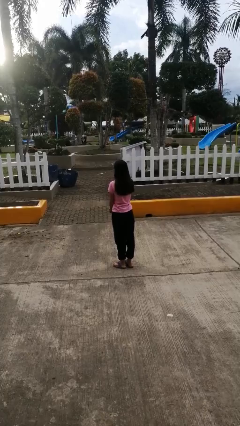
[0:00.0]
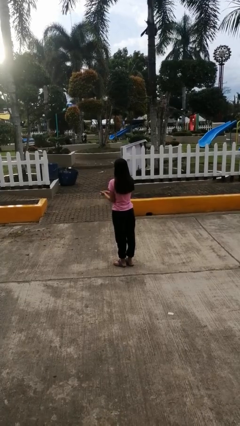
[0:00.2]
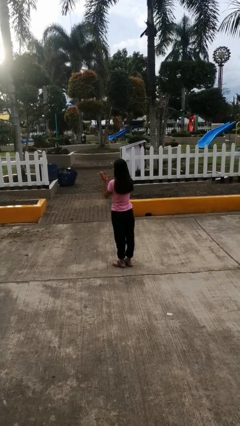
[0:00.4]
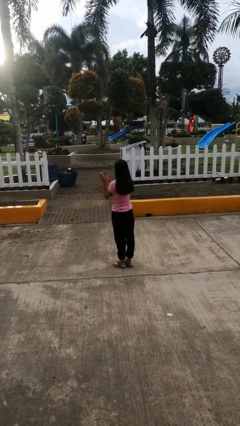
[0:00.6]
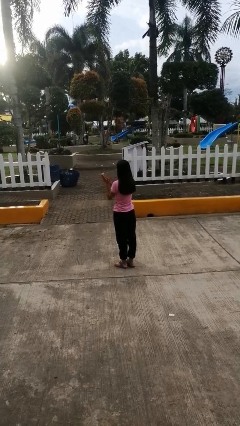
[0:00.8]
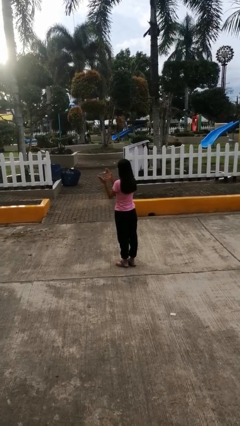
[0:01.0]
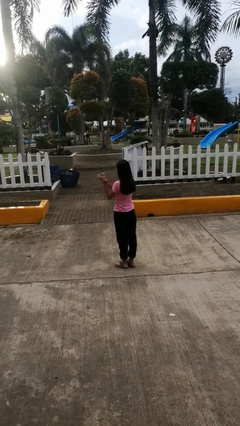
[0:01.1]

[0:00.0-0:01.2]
person claps hands

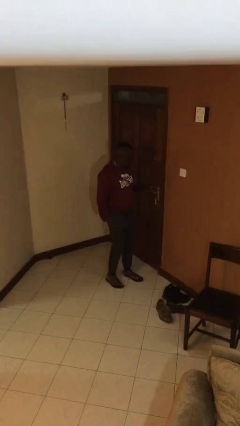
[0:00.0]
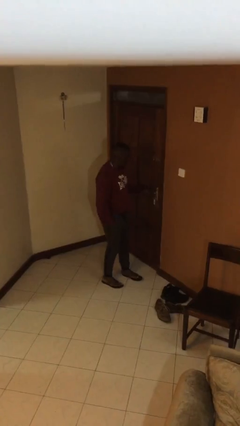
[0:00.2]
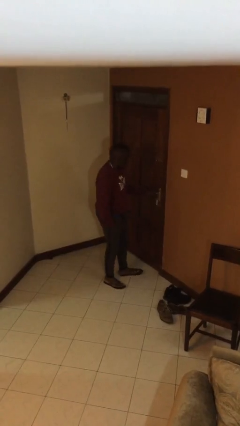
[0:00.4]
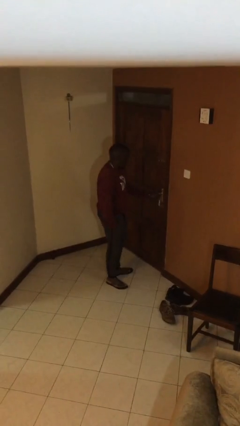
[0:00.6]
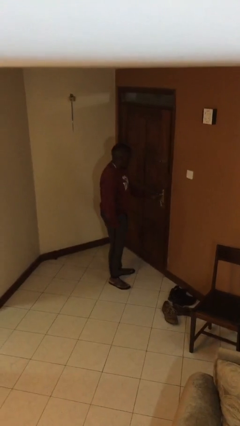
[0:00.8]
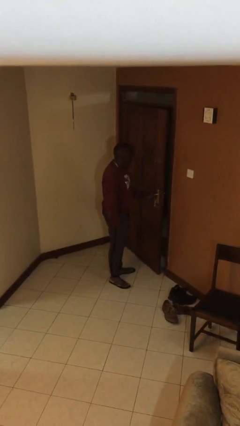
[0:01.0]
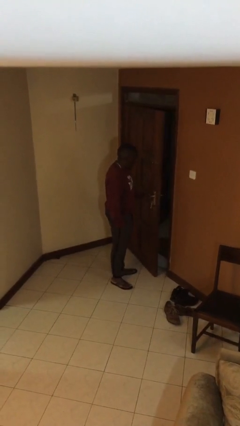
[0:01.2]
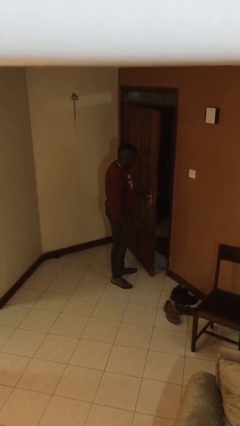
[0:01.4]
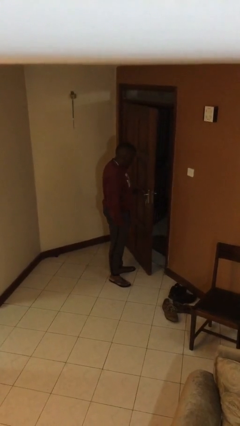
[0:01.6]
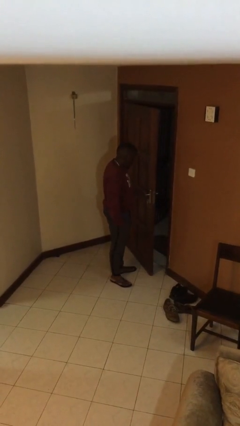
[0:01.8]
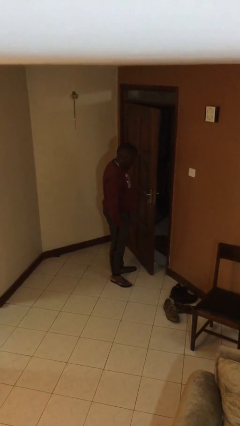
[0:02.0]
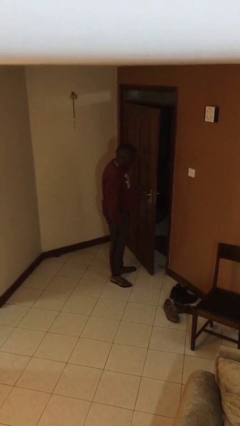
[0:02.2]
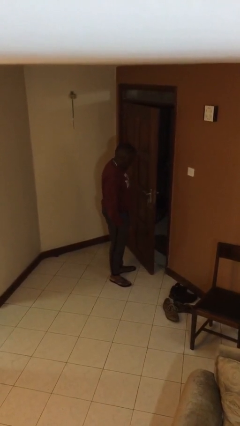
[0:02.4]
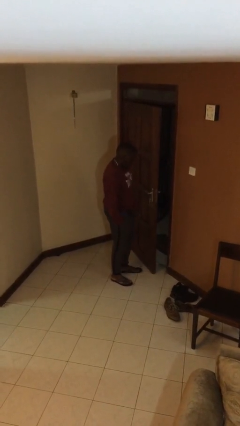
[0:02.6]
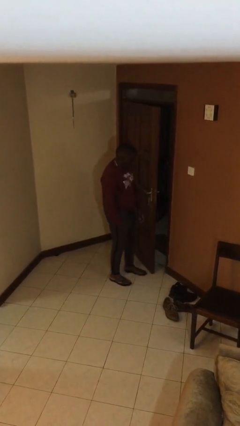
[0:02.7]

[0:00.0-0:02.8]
person opens facility door

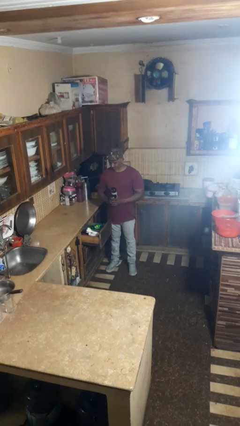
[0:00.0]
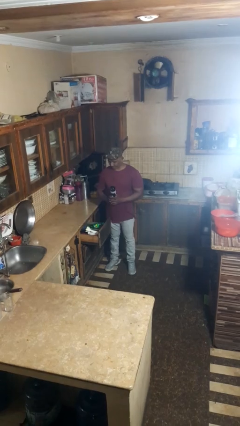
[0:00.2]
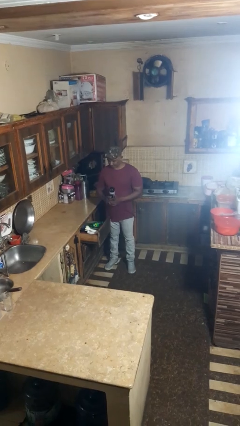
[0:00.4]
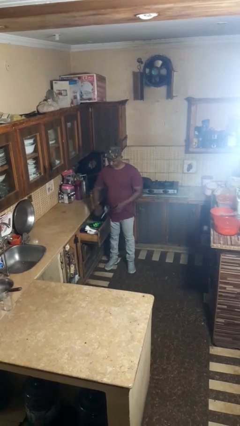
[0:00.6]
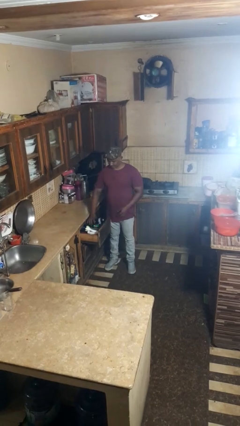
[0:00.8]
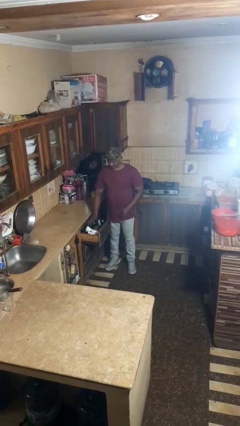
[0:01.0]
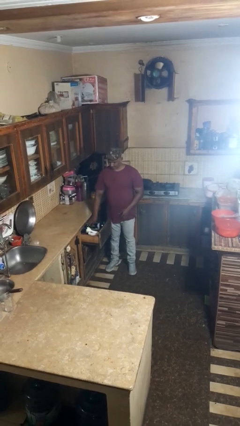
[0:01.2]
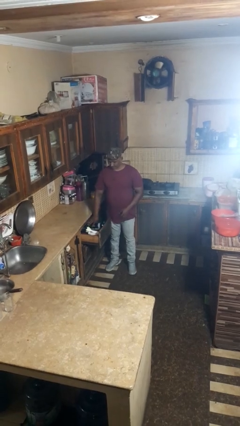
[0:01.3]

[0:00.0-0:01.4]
person puts object into kitchen drawer

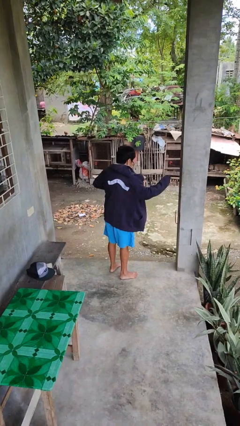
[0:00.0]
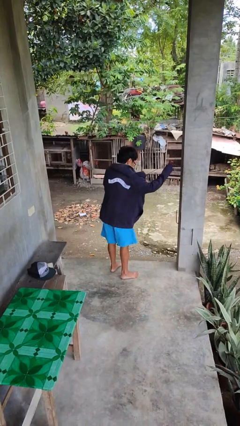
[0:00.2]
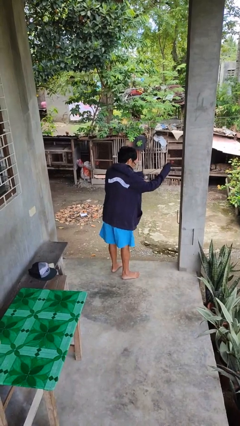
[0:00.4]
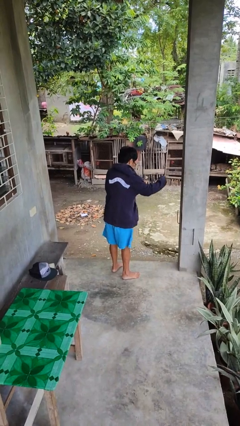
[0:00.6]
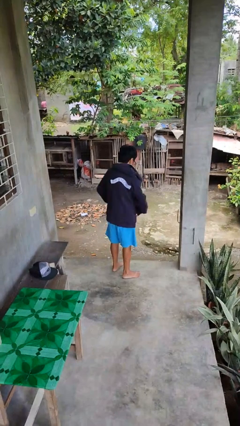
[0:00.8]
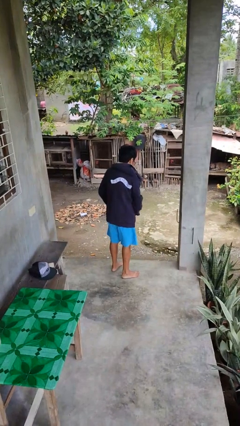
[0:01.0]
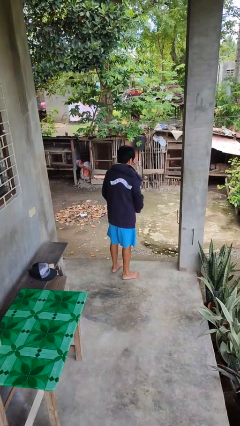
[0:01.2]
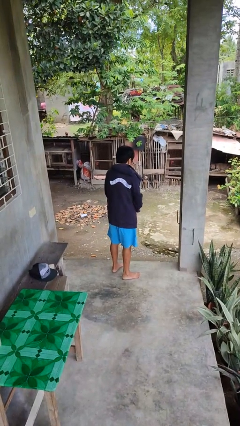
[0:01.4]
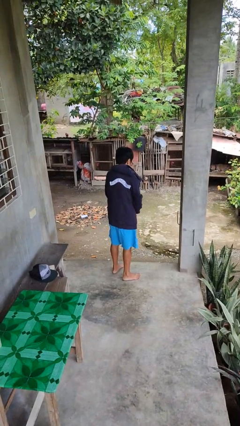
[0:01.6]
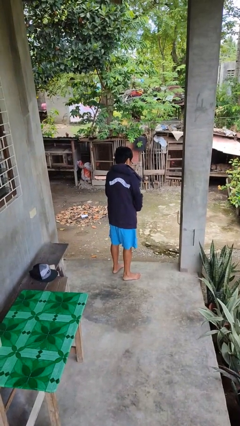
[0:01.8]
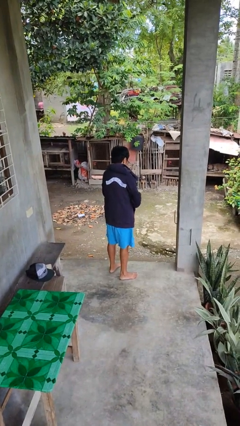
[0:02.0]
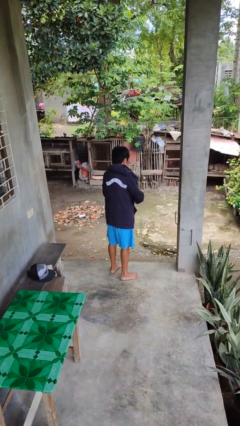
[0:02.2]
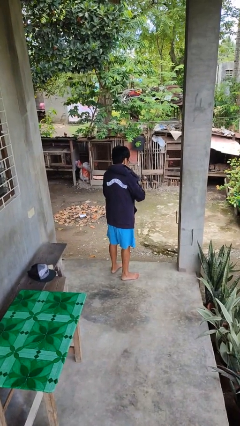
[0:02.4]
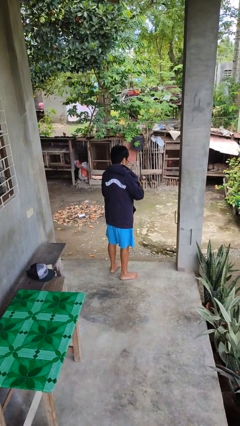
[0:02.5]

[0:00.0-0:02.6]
person zips up jacket

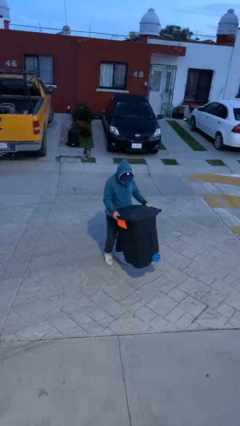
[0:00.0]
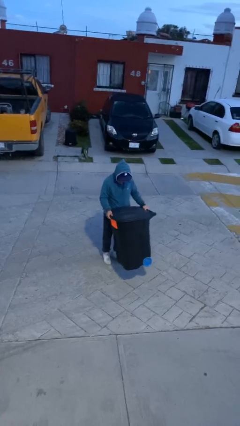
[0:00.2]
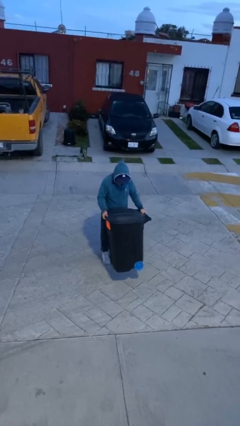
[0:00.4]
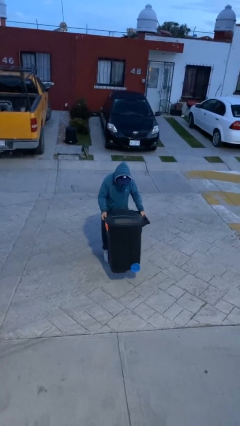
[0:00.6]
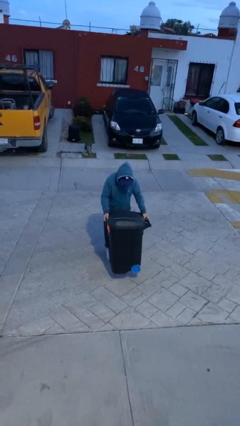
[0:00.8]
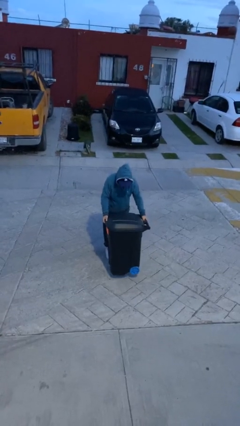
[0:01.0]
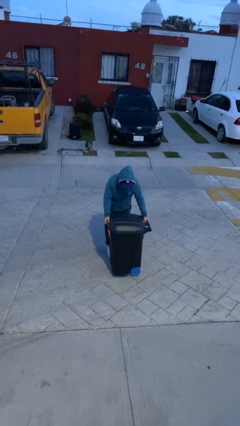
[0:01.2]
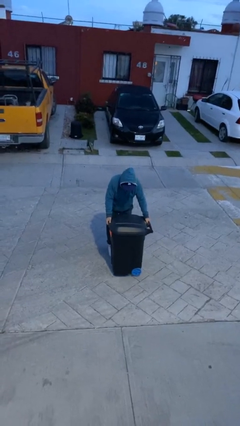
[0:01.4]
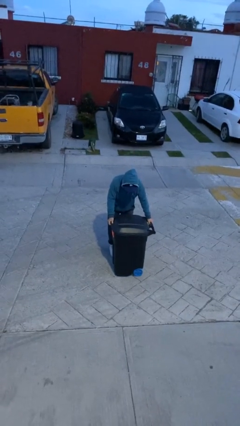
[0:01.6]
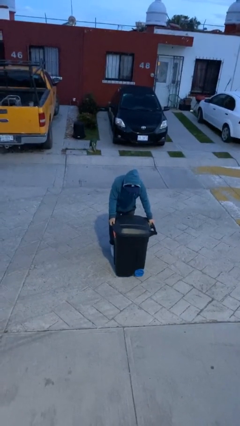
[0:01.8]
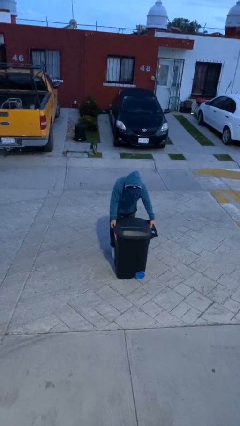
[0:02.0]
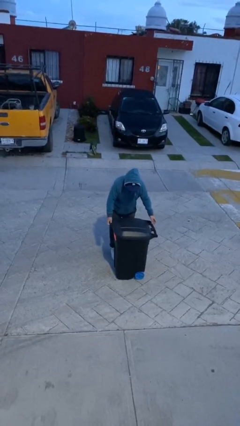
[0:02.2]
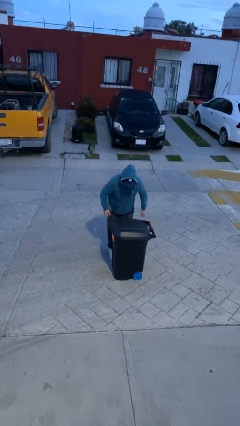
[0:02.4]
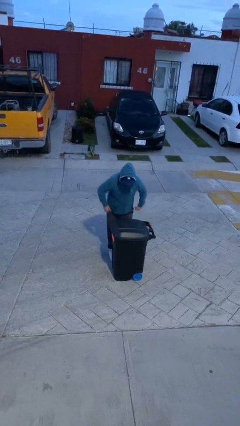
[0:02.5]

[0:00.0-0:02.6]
person puts down object on floor

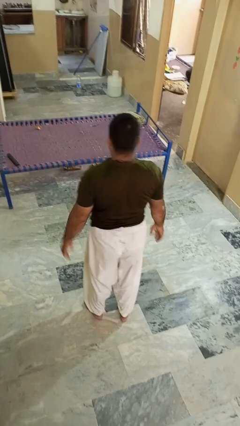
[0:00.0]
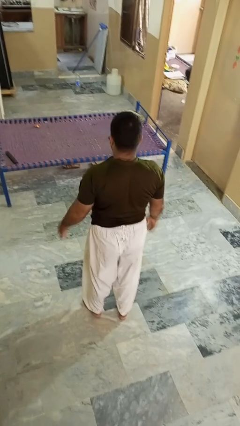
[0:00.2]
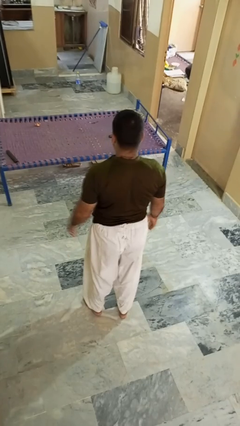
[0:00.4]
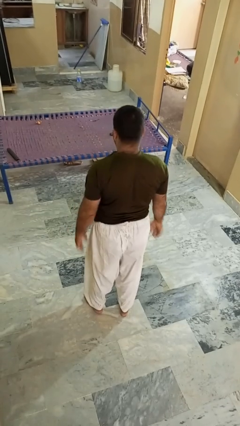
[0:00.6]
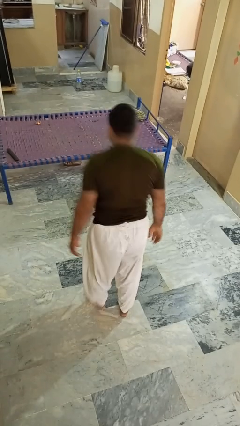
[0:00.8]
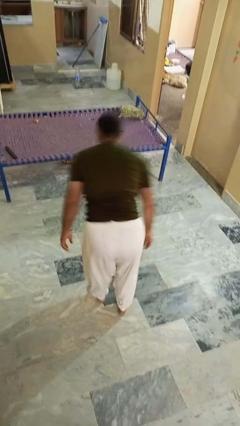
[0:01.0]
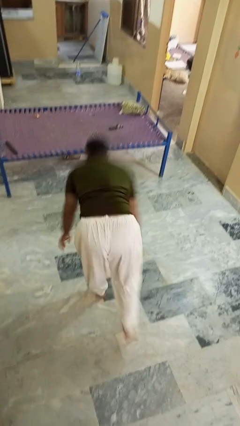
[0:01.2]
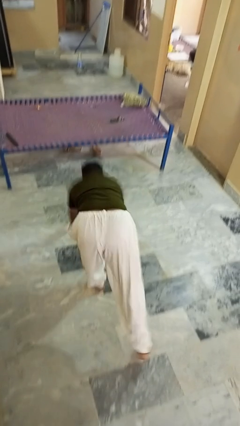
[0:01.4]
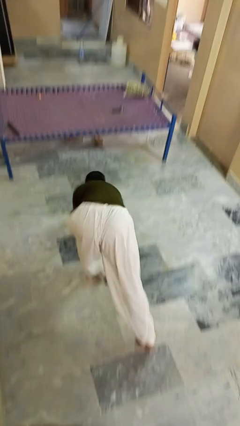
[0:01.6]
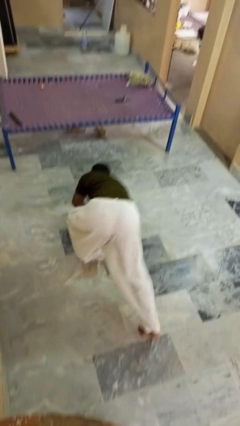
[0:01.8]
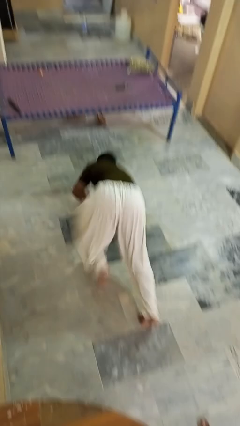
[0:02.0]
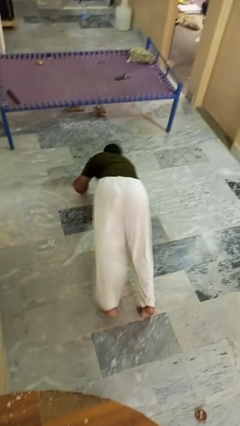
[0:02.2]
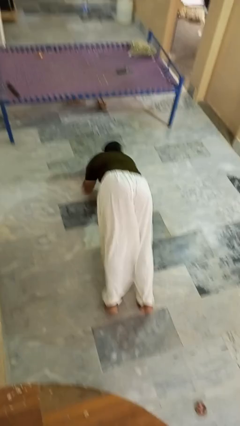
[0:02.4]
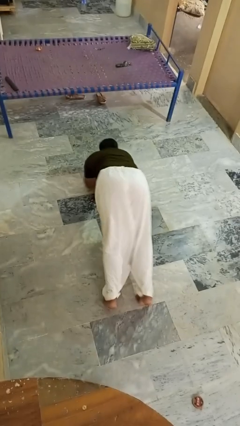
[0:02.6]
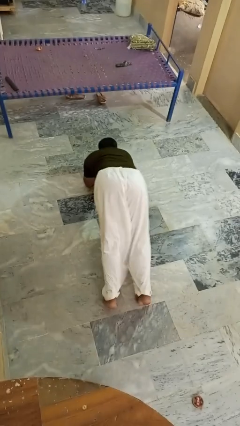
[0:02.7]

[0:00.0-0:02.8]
person exercises with plank

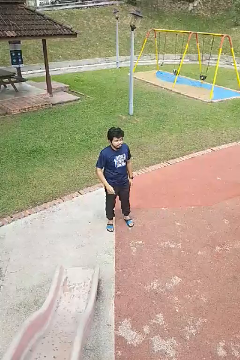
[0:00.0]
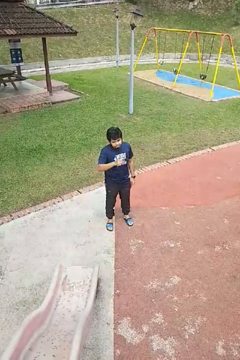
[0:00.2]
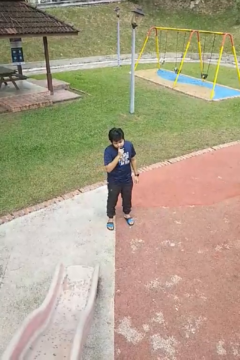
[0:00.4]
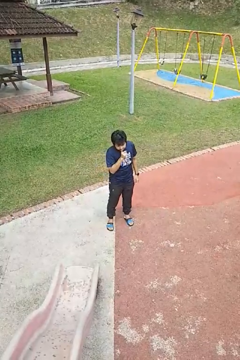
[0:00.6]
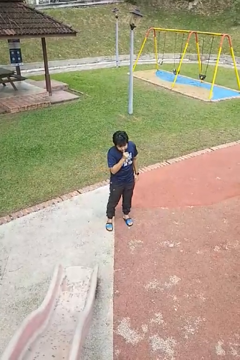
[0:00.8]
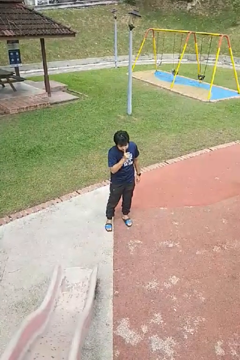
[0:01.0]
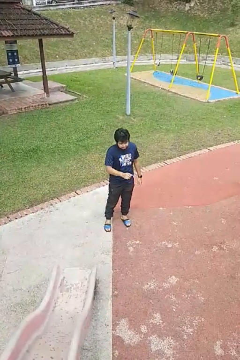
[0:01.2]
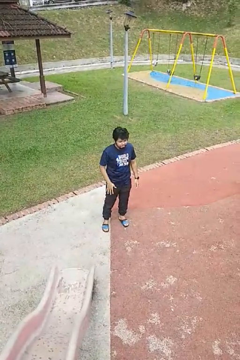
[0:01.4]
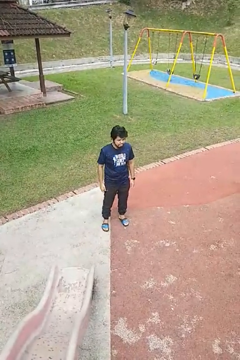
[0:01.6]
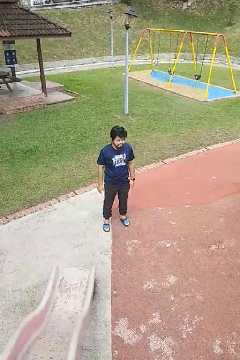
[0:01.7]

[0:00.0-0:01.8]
person gestures be quiet

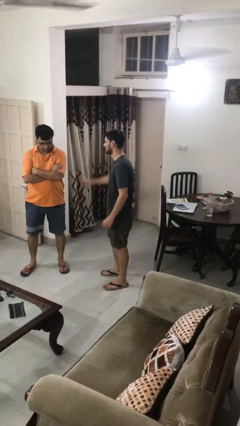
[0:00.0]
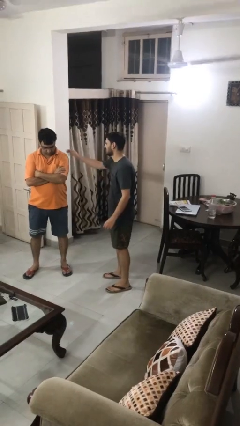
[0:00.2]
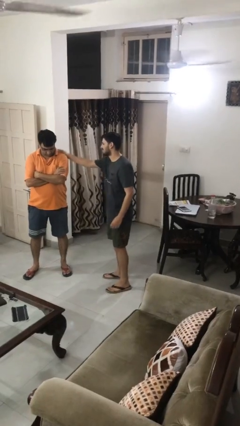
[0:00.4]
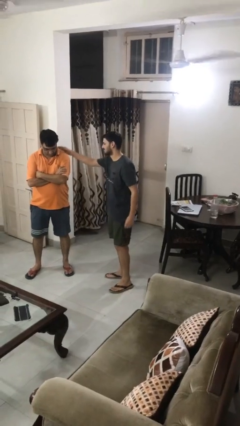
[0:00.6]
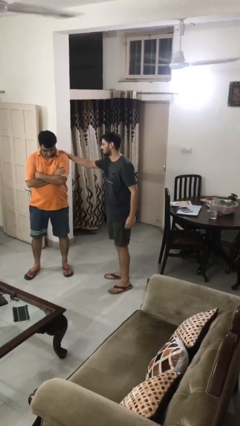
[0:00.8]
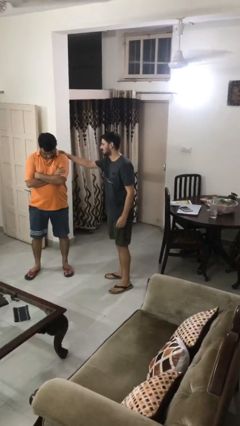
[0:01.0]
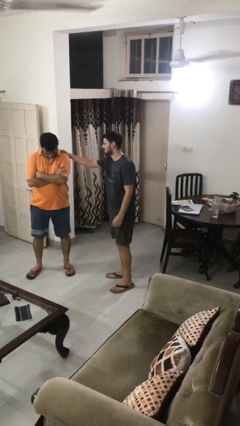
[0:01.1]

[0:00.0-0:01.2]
person pounds shoulders of person

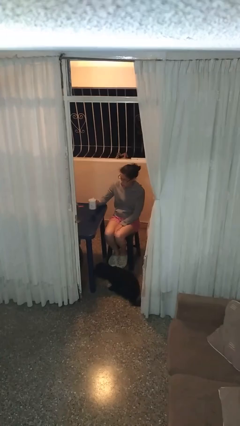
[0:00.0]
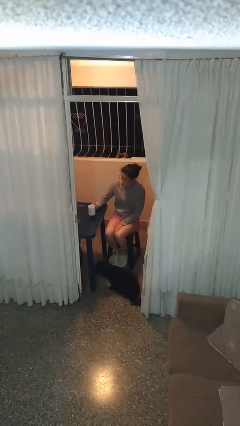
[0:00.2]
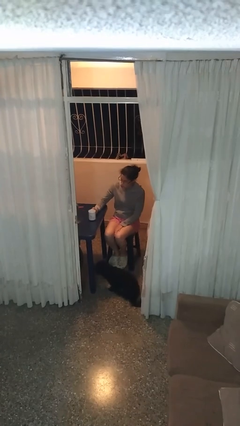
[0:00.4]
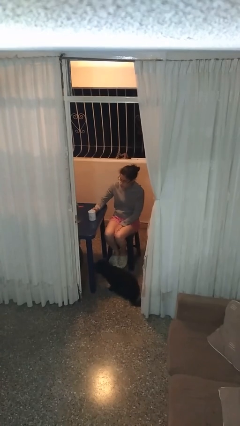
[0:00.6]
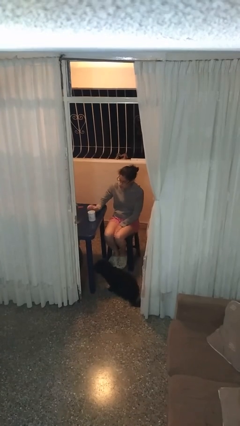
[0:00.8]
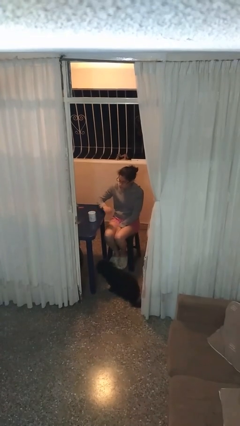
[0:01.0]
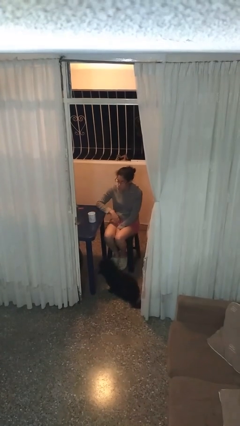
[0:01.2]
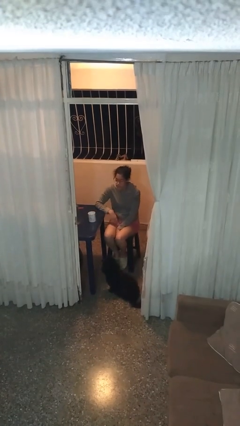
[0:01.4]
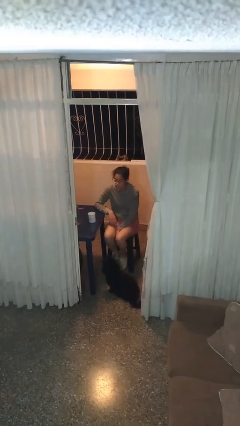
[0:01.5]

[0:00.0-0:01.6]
person puts down object on table
